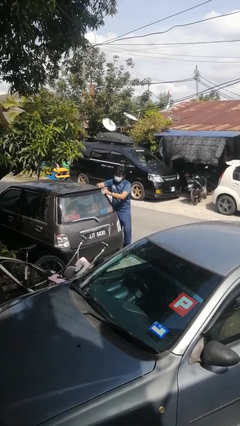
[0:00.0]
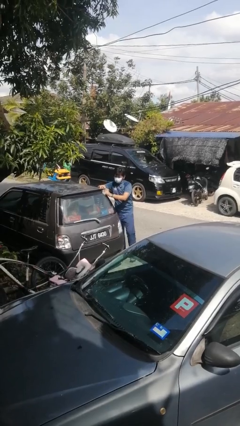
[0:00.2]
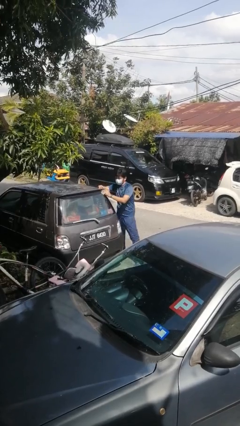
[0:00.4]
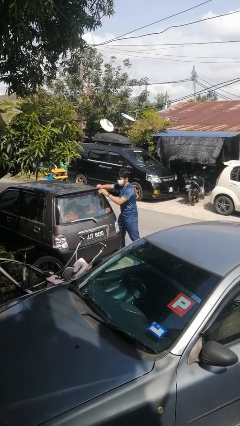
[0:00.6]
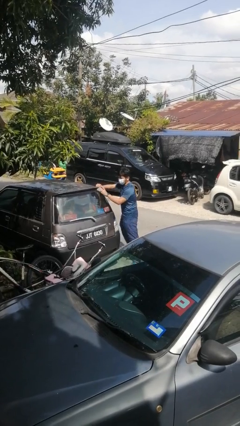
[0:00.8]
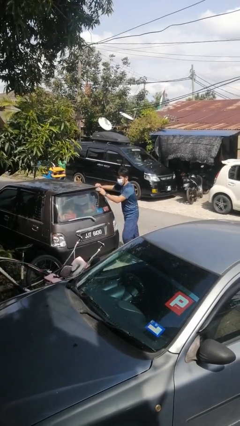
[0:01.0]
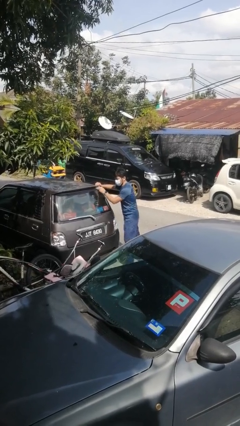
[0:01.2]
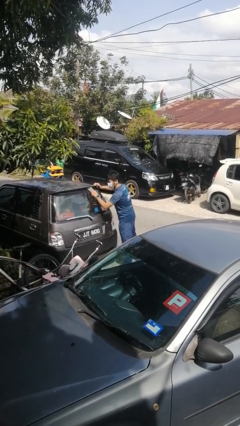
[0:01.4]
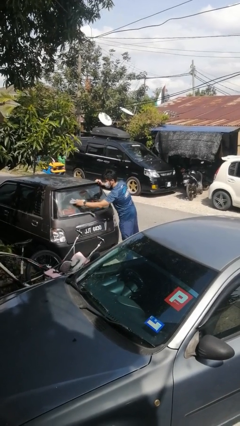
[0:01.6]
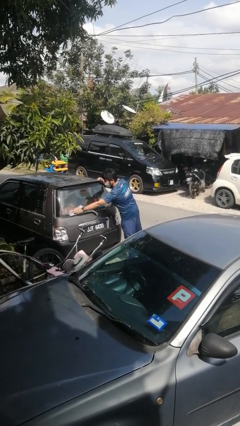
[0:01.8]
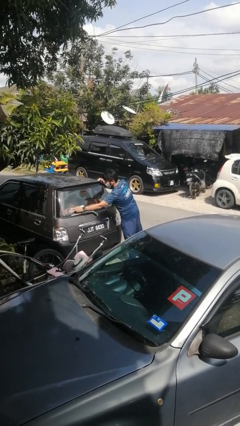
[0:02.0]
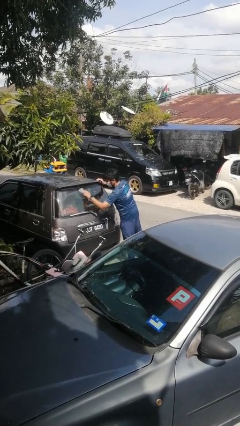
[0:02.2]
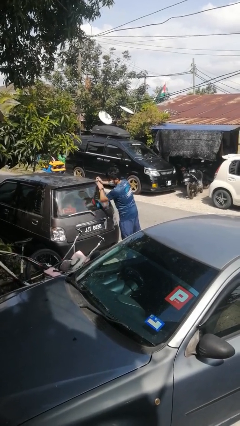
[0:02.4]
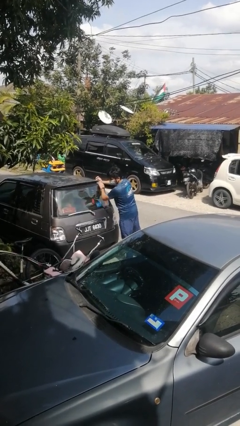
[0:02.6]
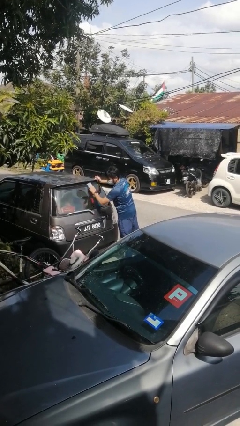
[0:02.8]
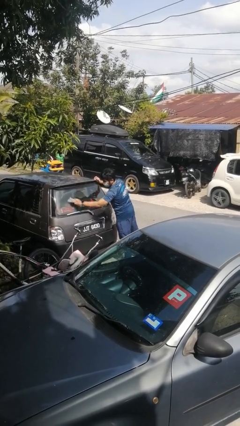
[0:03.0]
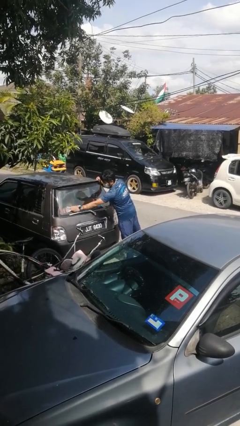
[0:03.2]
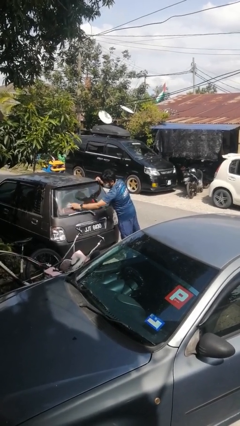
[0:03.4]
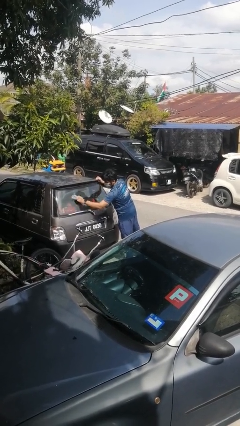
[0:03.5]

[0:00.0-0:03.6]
person polishes car with rag

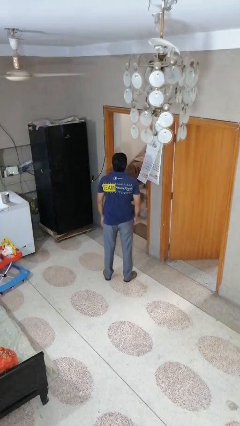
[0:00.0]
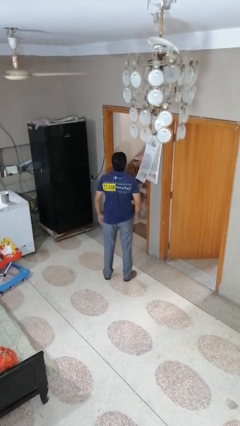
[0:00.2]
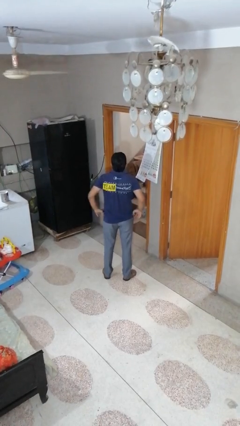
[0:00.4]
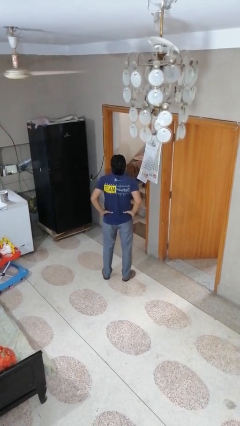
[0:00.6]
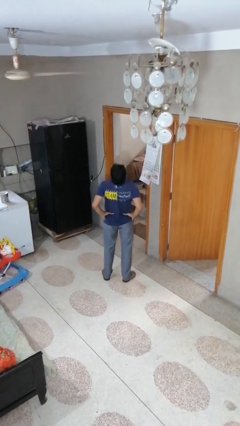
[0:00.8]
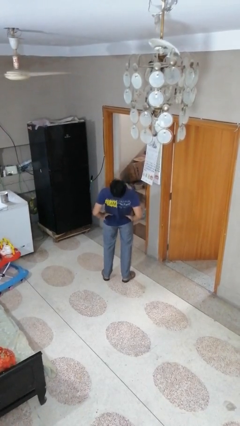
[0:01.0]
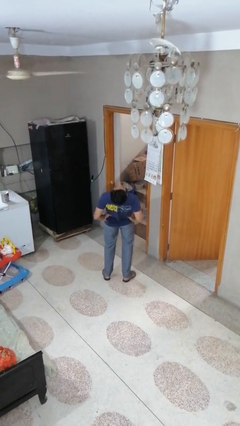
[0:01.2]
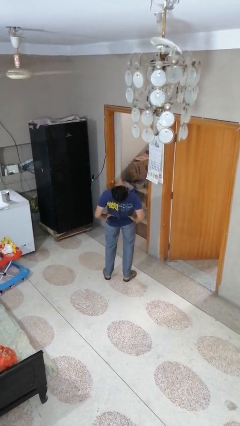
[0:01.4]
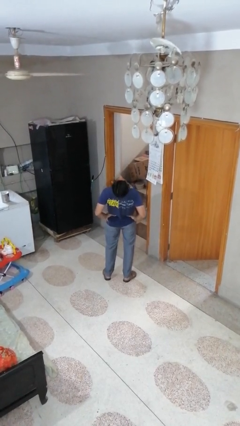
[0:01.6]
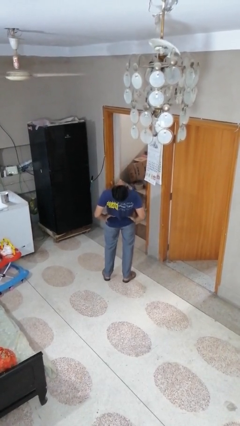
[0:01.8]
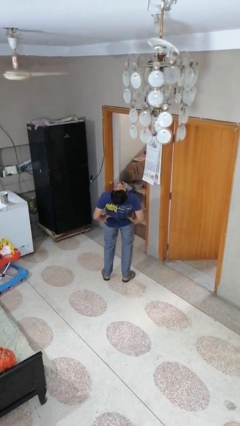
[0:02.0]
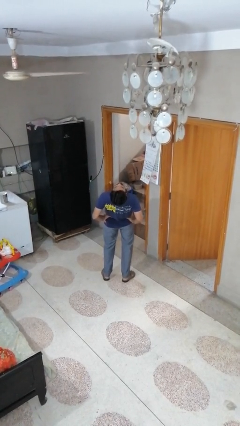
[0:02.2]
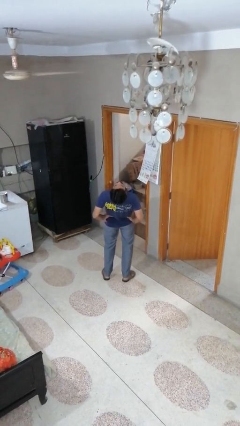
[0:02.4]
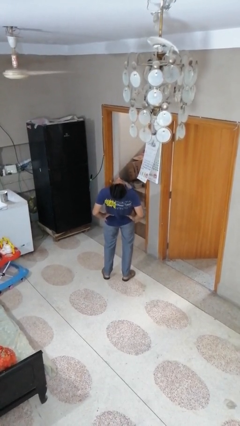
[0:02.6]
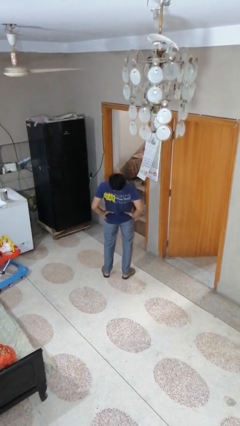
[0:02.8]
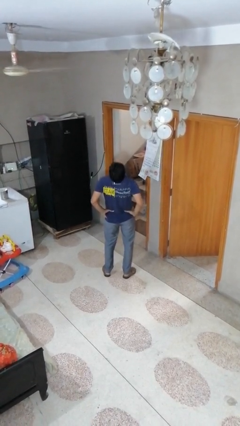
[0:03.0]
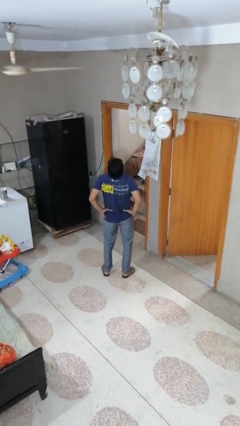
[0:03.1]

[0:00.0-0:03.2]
person stretches back

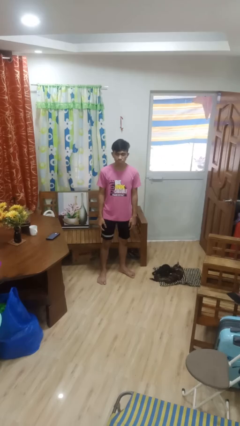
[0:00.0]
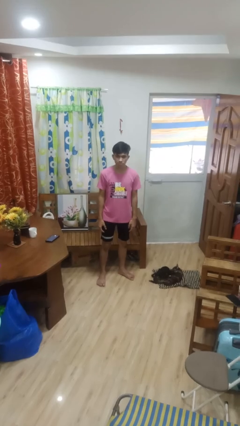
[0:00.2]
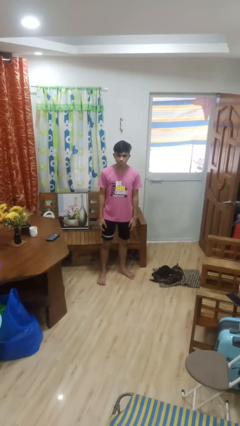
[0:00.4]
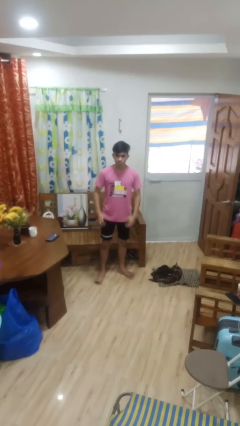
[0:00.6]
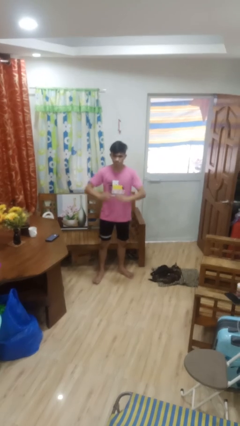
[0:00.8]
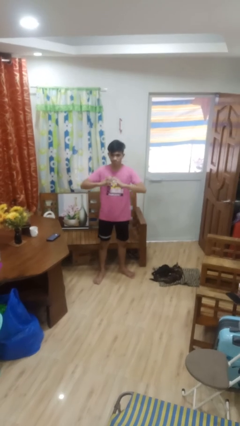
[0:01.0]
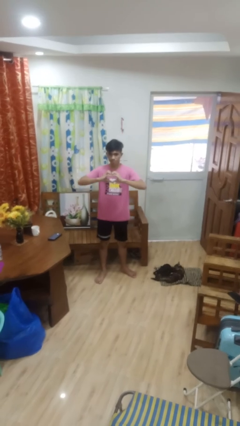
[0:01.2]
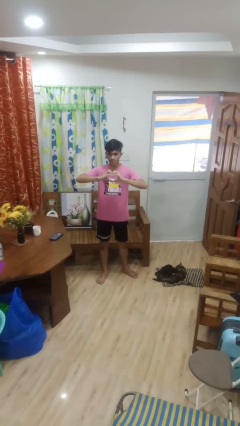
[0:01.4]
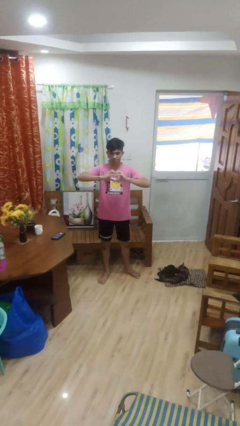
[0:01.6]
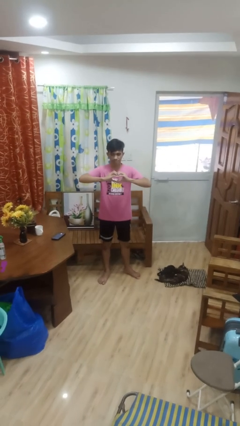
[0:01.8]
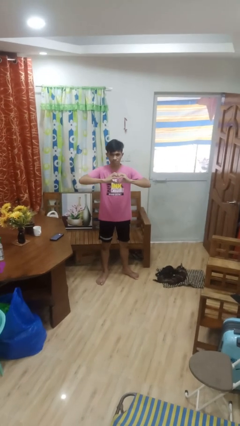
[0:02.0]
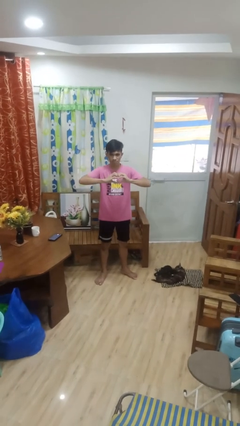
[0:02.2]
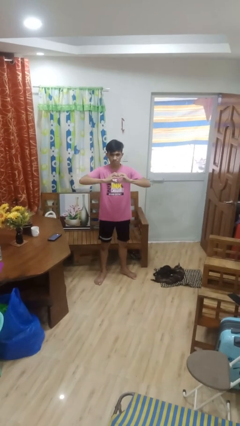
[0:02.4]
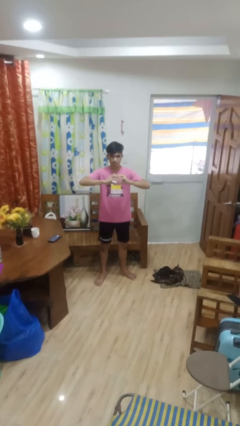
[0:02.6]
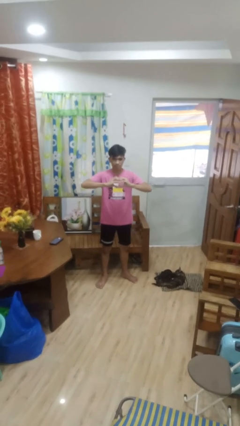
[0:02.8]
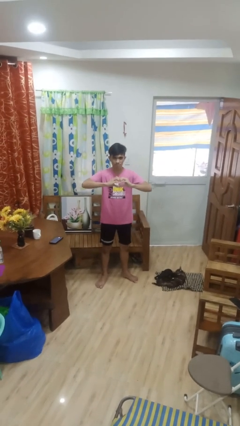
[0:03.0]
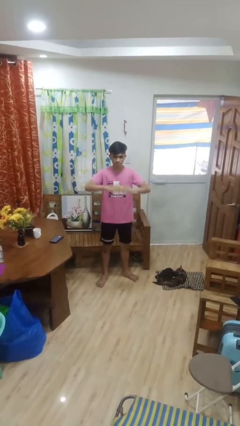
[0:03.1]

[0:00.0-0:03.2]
person gestures heart

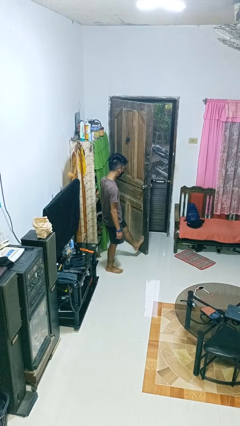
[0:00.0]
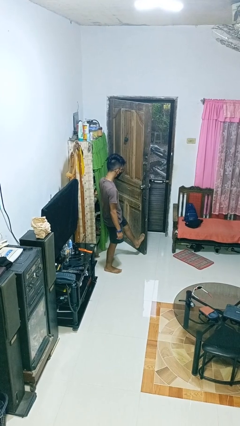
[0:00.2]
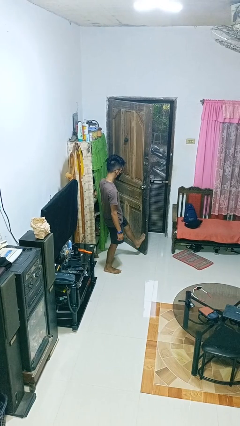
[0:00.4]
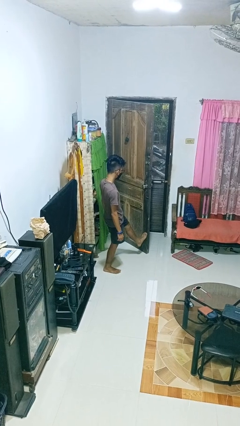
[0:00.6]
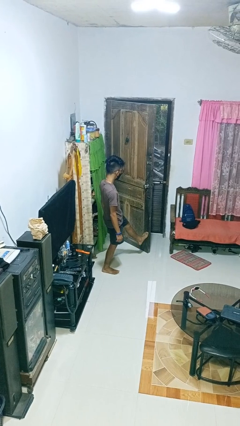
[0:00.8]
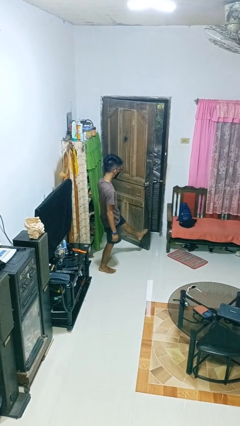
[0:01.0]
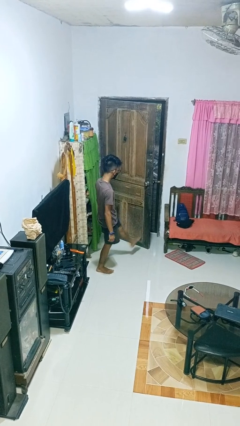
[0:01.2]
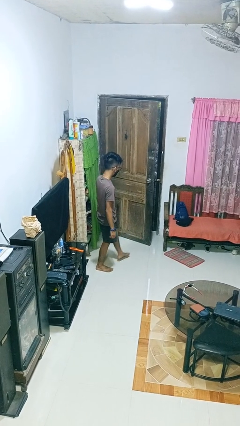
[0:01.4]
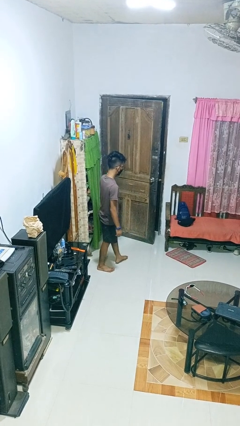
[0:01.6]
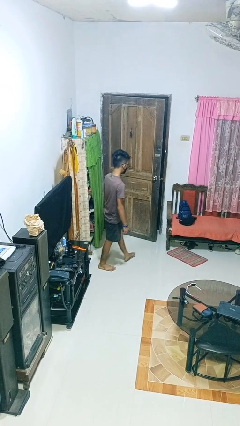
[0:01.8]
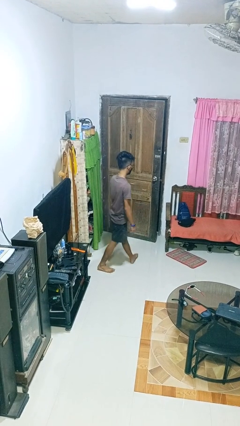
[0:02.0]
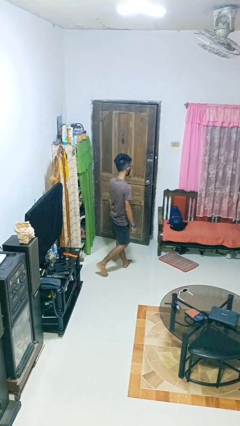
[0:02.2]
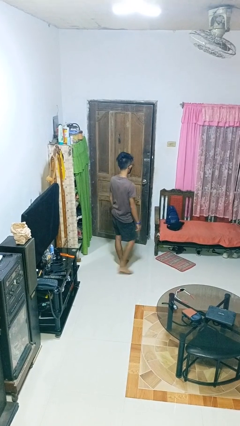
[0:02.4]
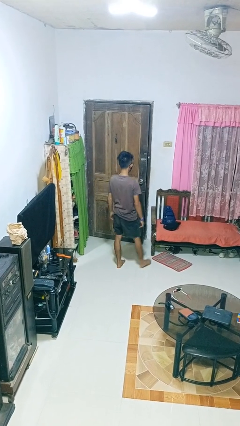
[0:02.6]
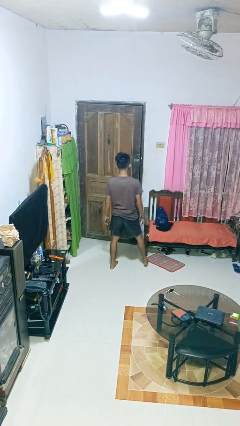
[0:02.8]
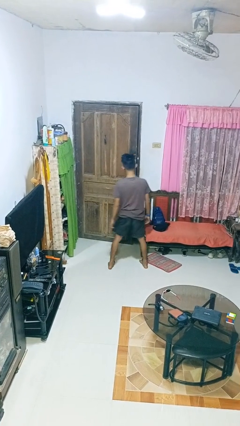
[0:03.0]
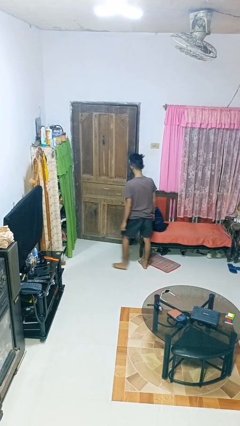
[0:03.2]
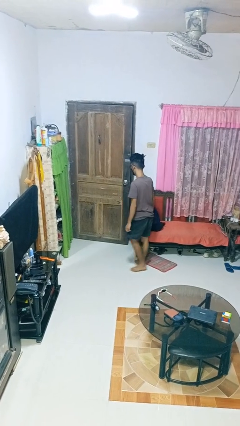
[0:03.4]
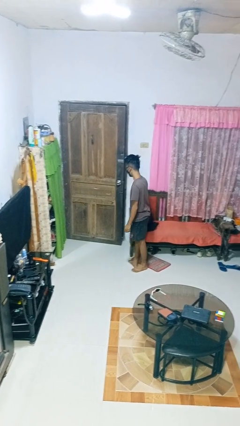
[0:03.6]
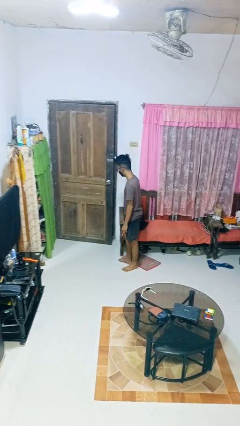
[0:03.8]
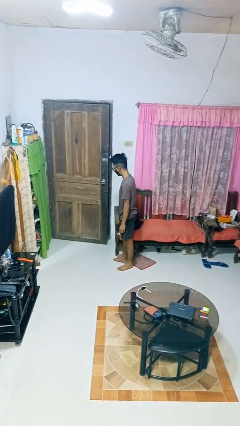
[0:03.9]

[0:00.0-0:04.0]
person closes door with foot

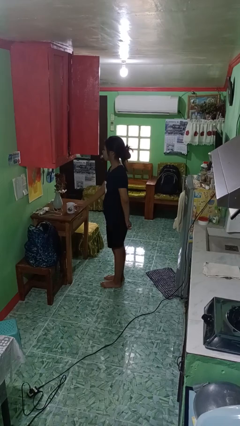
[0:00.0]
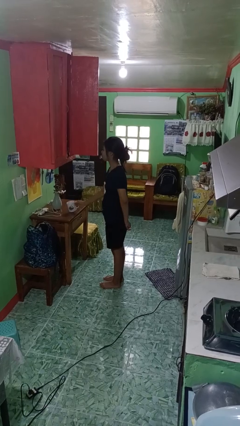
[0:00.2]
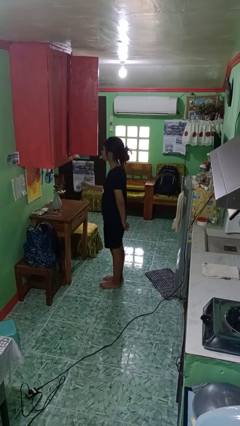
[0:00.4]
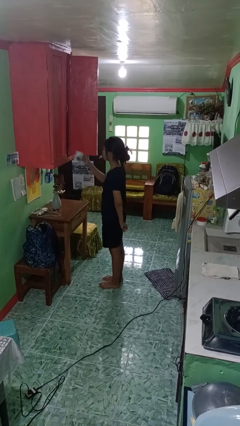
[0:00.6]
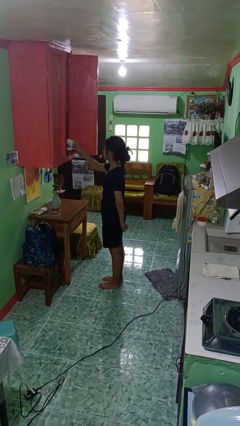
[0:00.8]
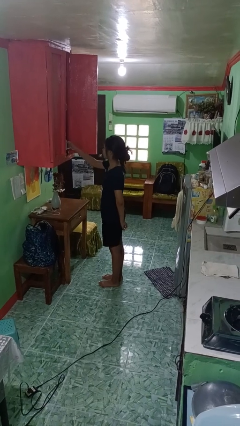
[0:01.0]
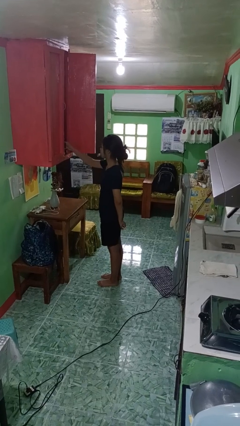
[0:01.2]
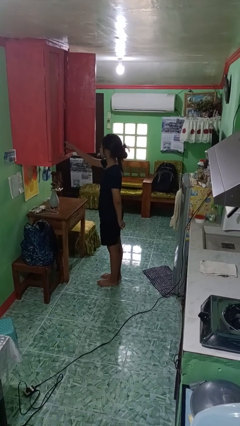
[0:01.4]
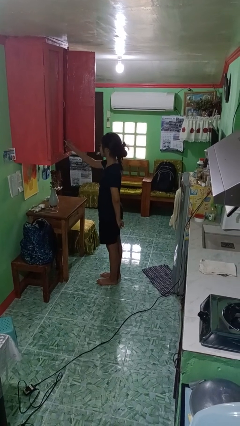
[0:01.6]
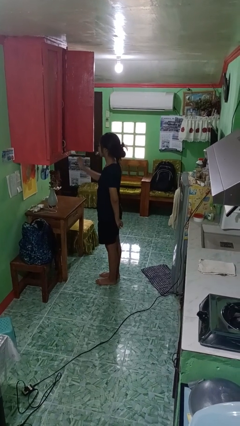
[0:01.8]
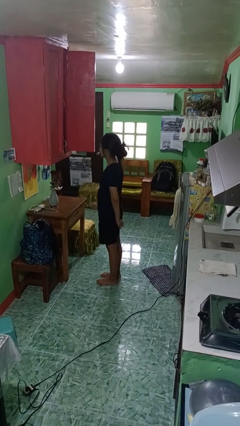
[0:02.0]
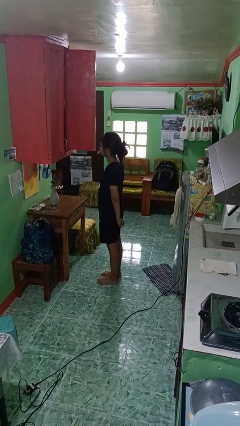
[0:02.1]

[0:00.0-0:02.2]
person puts object in cabinet

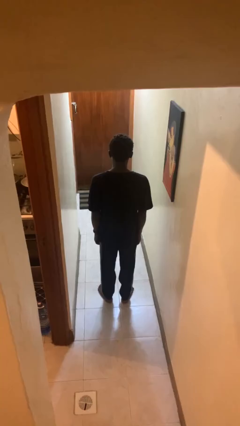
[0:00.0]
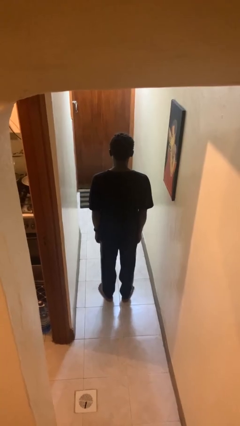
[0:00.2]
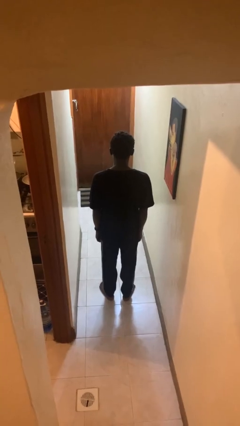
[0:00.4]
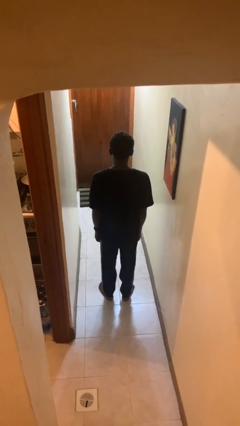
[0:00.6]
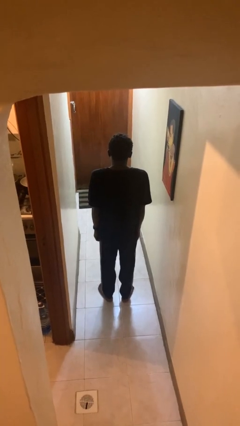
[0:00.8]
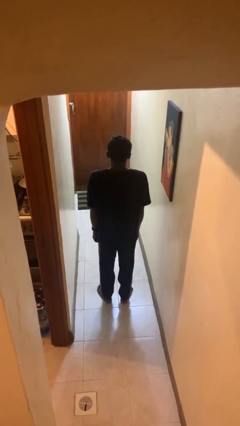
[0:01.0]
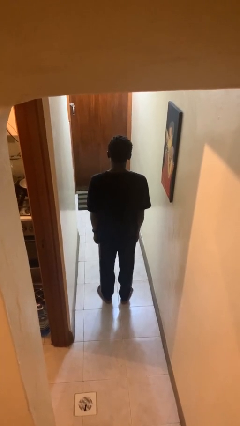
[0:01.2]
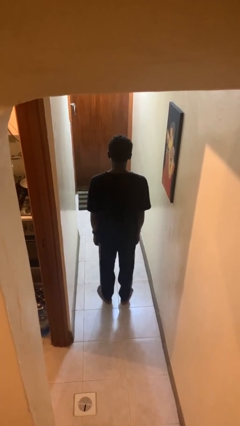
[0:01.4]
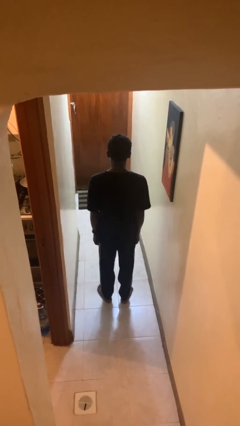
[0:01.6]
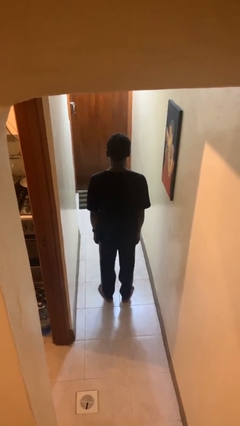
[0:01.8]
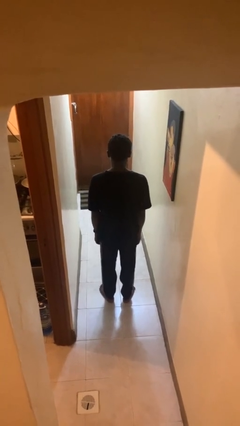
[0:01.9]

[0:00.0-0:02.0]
person shrugs
